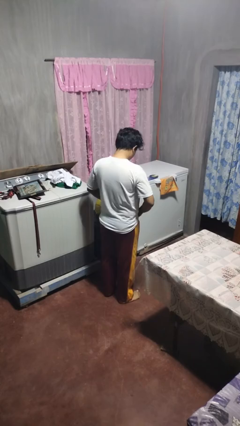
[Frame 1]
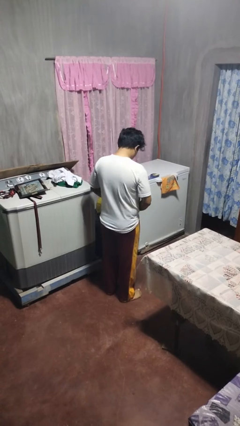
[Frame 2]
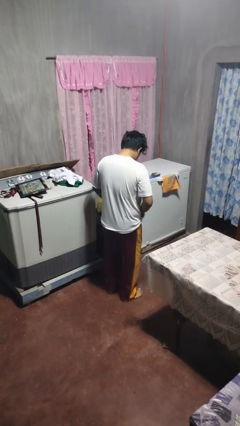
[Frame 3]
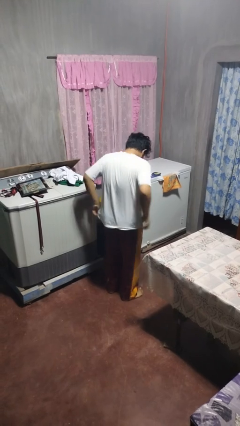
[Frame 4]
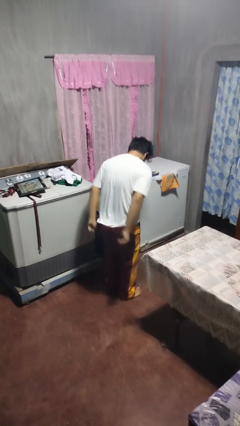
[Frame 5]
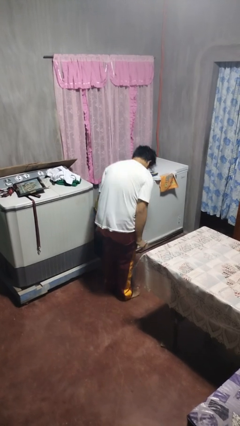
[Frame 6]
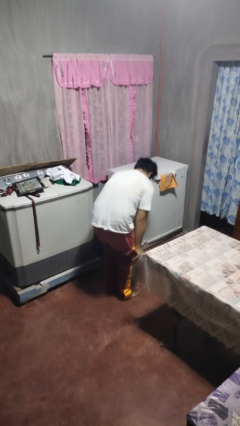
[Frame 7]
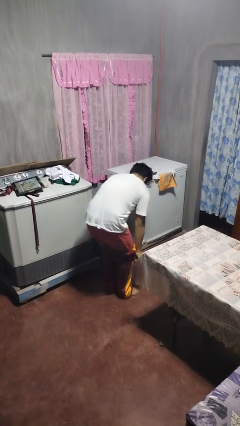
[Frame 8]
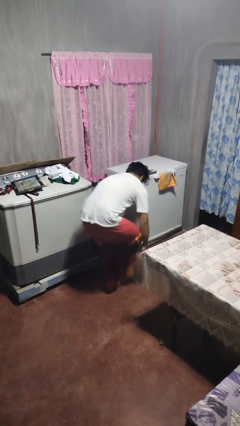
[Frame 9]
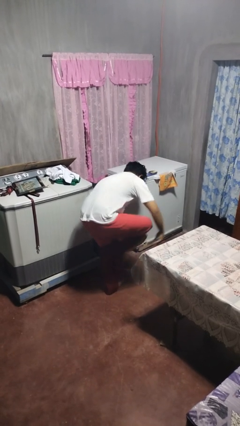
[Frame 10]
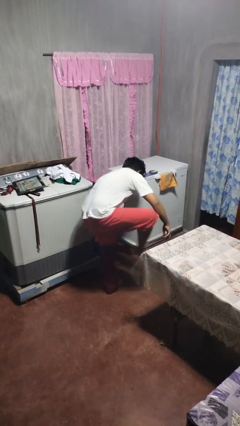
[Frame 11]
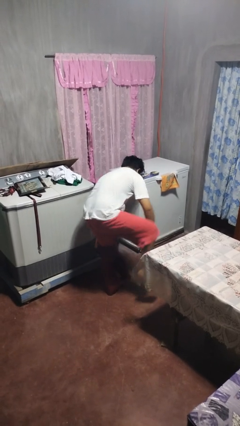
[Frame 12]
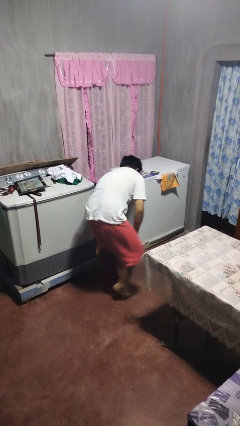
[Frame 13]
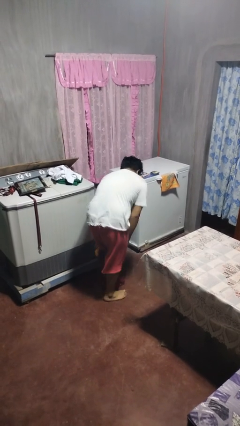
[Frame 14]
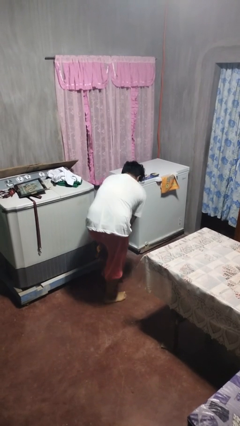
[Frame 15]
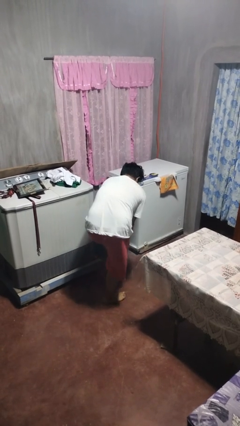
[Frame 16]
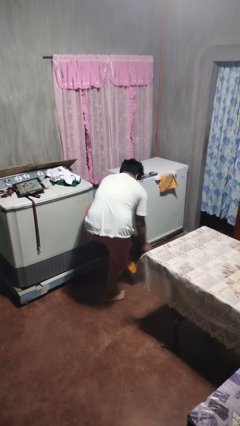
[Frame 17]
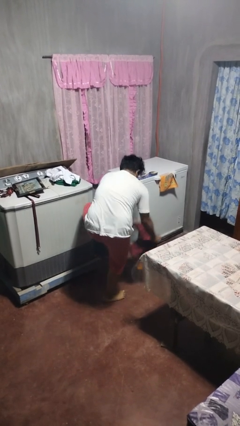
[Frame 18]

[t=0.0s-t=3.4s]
person takes off pants

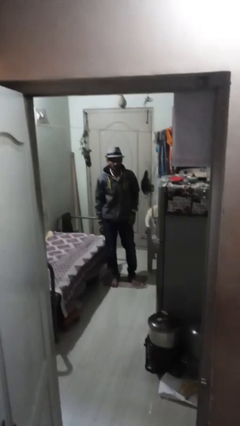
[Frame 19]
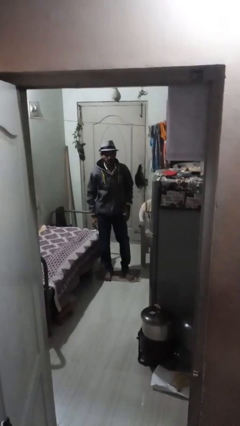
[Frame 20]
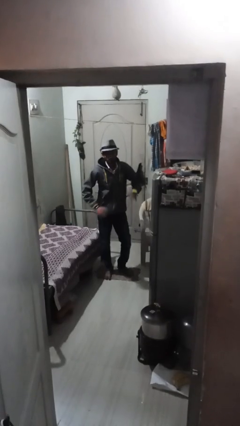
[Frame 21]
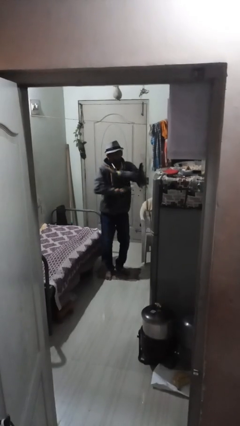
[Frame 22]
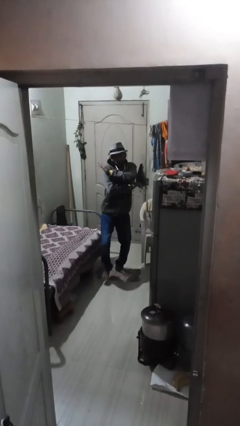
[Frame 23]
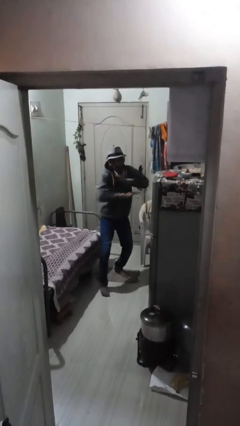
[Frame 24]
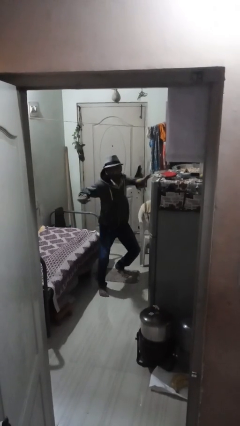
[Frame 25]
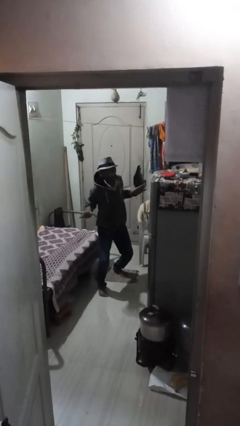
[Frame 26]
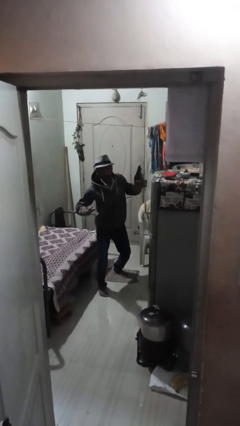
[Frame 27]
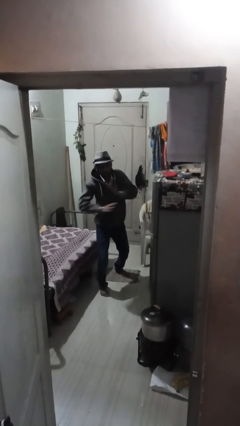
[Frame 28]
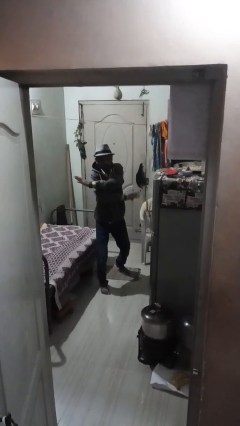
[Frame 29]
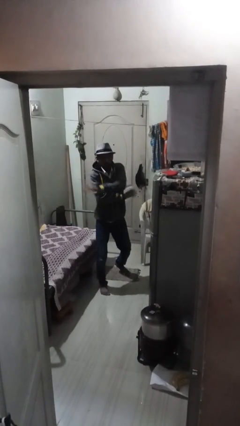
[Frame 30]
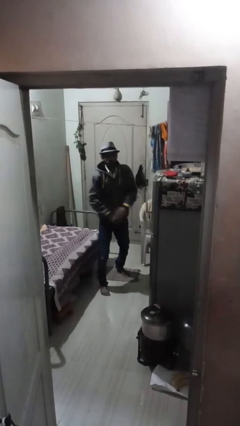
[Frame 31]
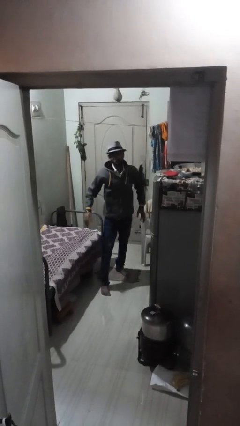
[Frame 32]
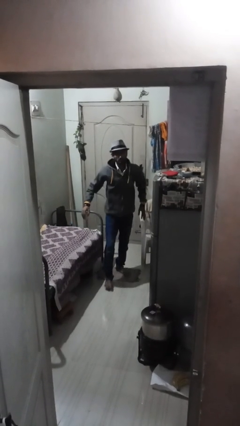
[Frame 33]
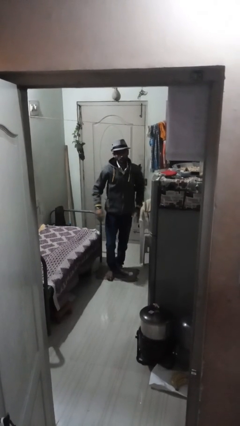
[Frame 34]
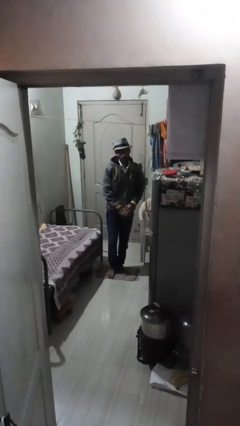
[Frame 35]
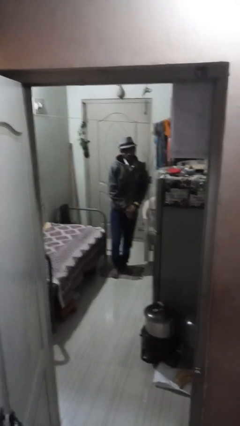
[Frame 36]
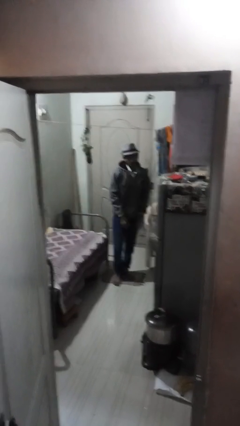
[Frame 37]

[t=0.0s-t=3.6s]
person karate chop

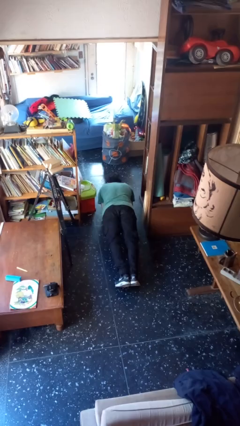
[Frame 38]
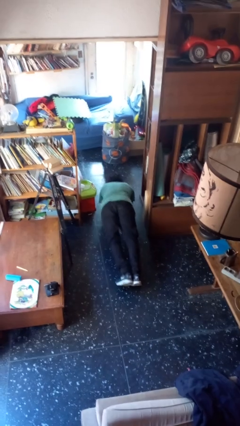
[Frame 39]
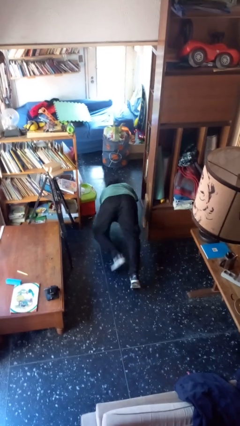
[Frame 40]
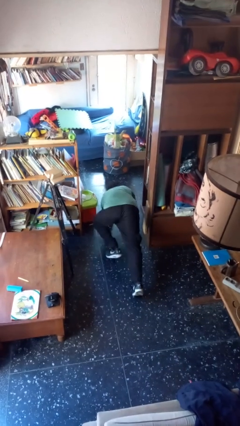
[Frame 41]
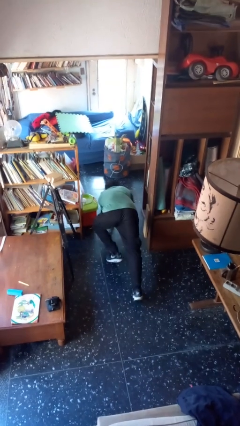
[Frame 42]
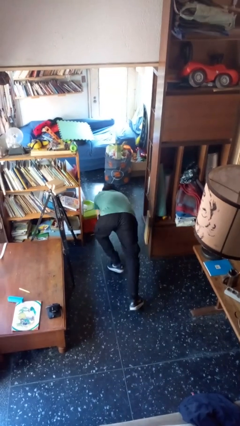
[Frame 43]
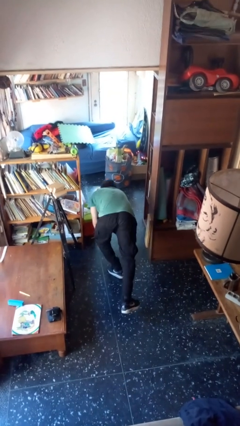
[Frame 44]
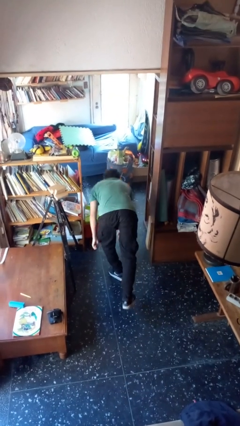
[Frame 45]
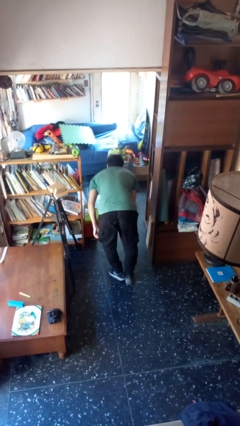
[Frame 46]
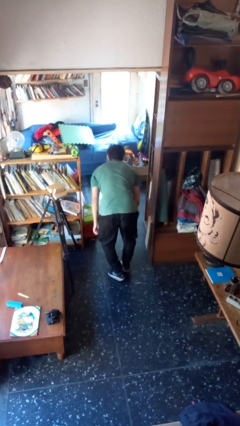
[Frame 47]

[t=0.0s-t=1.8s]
person stands up from floor

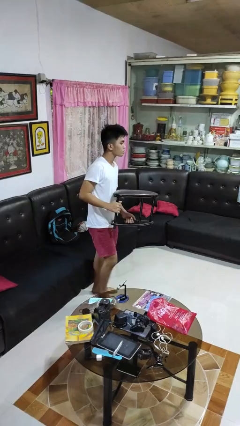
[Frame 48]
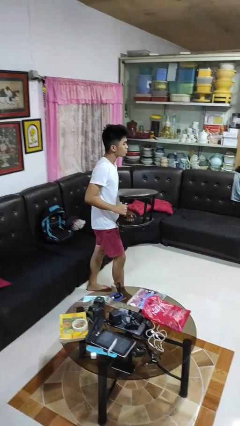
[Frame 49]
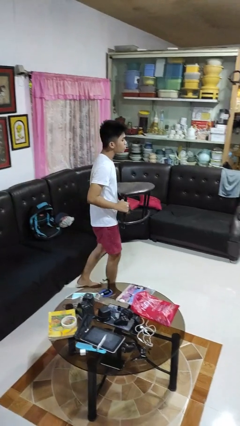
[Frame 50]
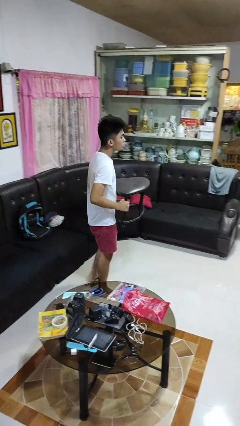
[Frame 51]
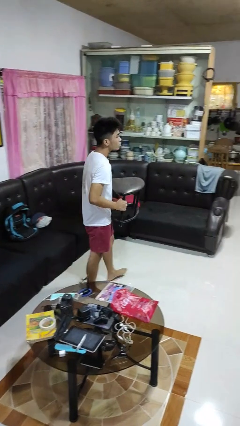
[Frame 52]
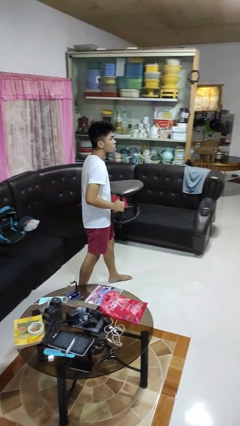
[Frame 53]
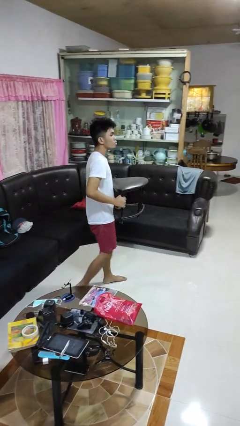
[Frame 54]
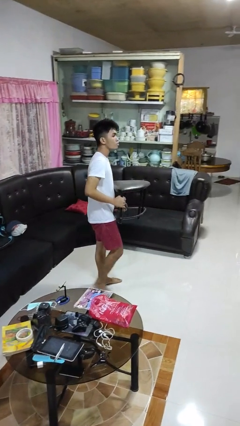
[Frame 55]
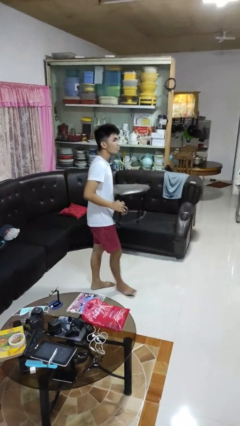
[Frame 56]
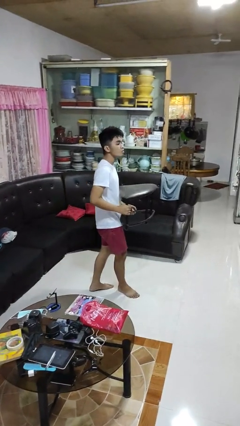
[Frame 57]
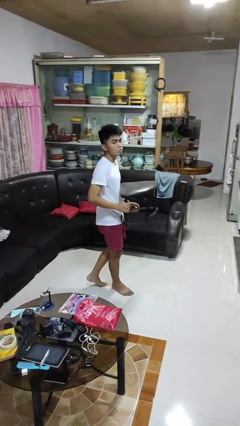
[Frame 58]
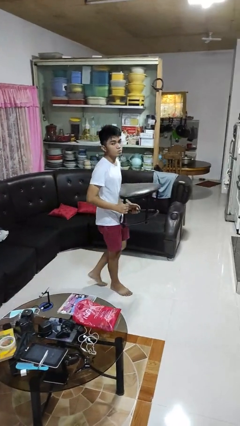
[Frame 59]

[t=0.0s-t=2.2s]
person carries furniture

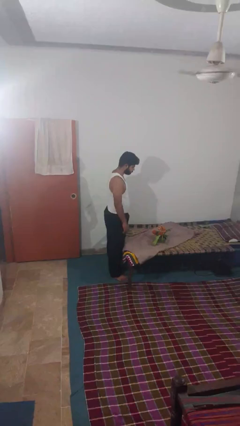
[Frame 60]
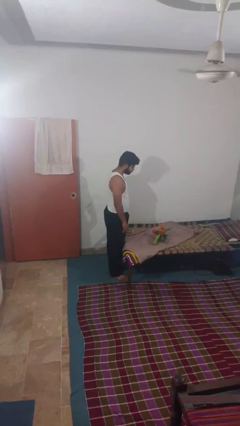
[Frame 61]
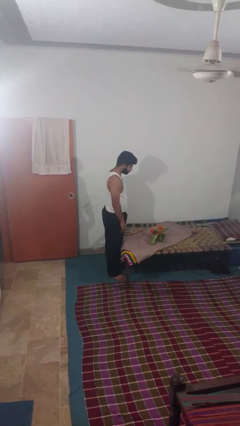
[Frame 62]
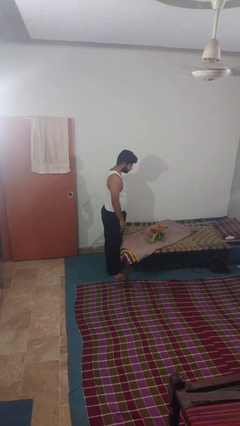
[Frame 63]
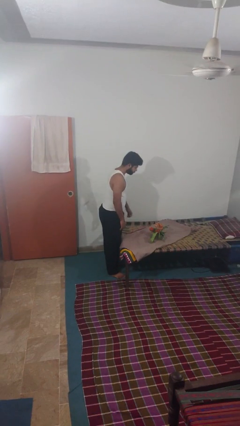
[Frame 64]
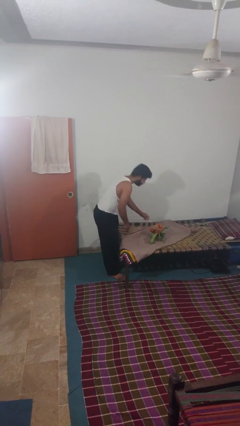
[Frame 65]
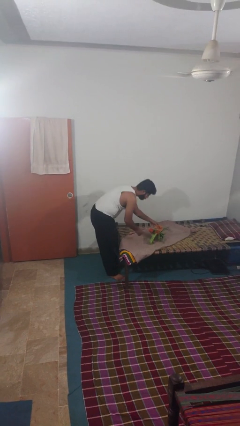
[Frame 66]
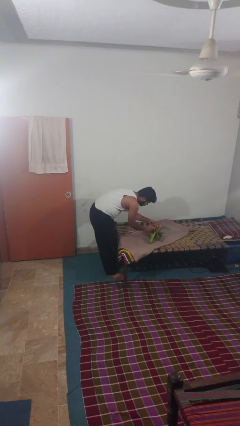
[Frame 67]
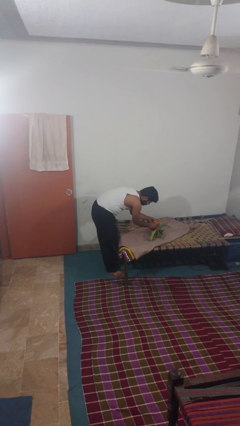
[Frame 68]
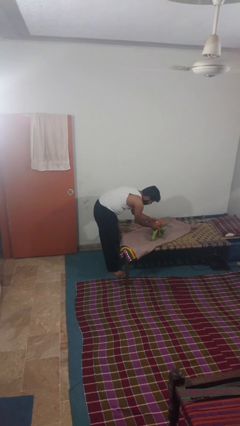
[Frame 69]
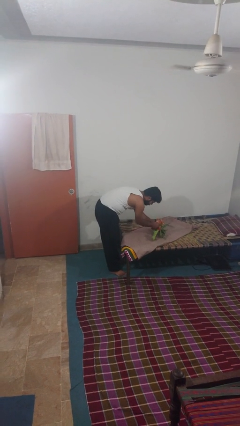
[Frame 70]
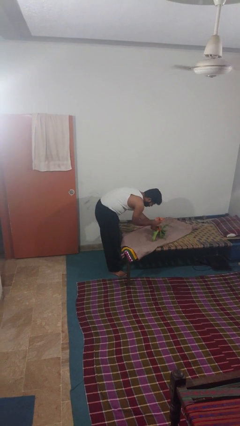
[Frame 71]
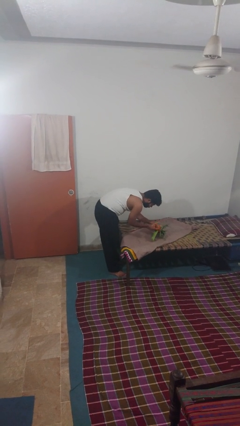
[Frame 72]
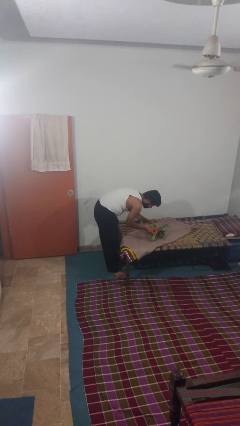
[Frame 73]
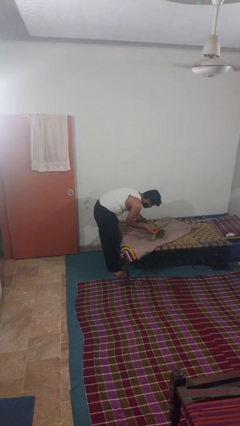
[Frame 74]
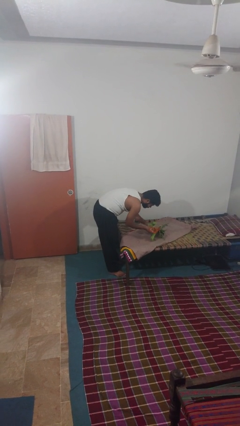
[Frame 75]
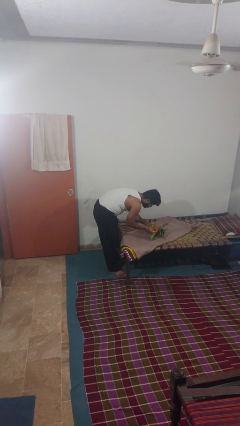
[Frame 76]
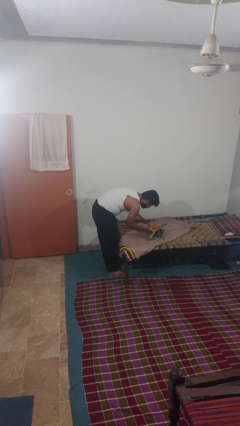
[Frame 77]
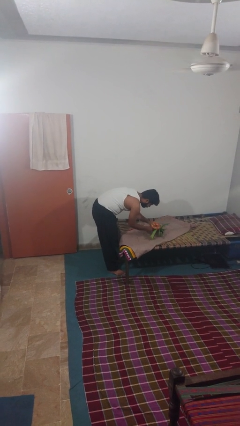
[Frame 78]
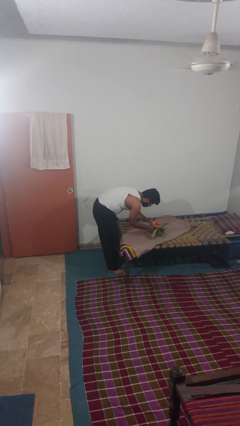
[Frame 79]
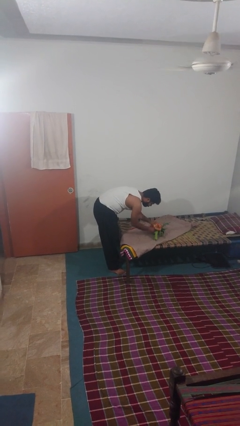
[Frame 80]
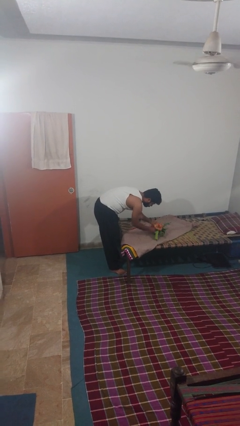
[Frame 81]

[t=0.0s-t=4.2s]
person arranges flowers in vase

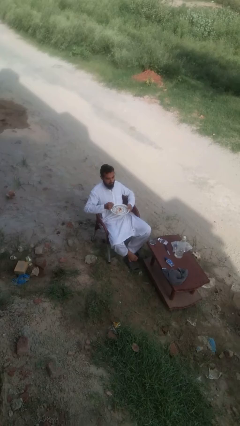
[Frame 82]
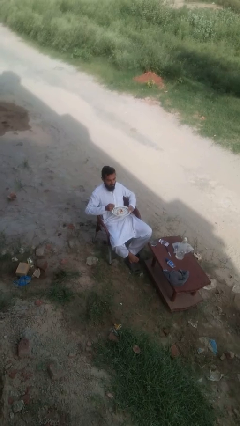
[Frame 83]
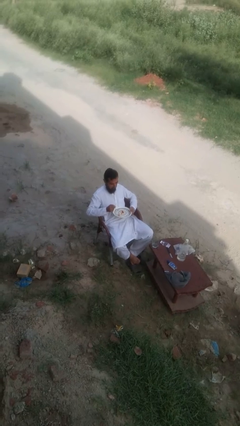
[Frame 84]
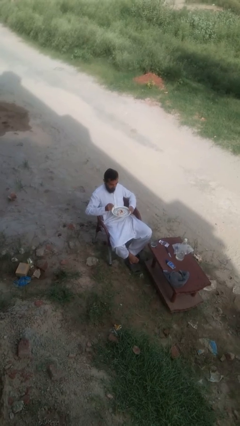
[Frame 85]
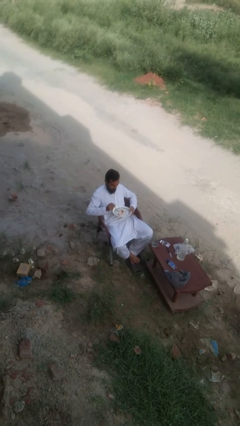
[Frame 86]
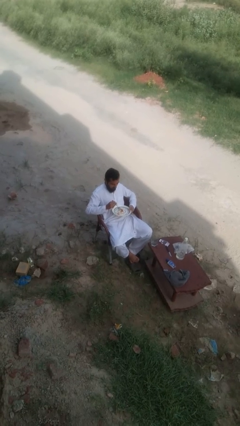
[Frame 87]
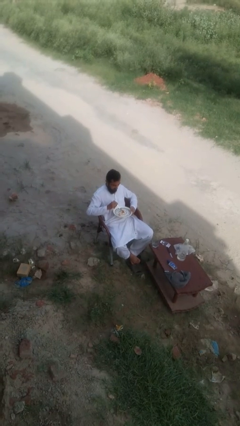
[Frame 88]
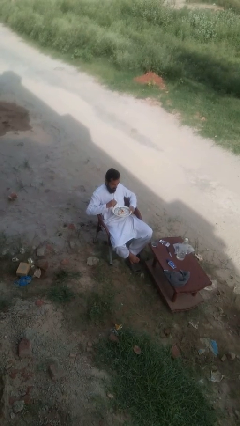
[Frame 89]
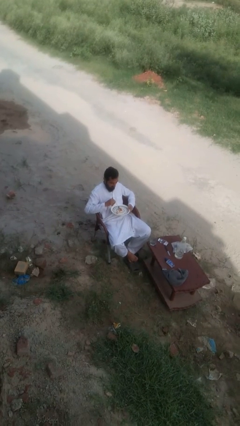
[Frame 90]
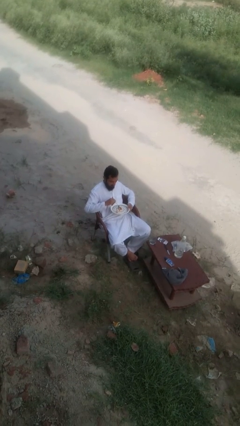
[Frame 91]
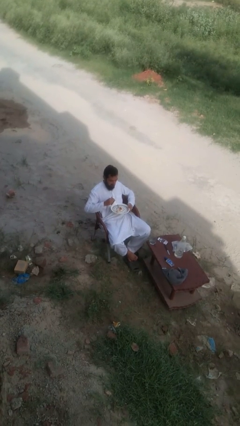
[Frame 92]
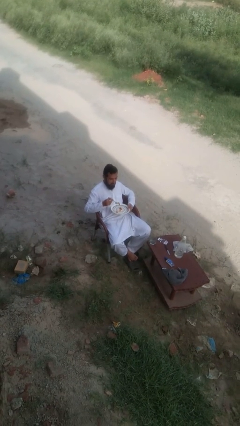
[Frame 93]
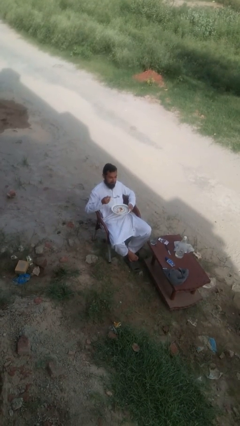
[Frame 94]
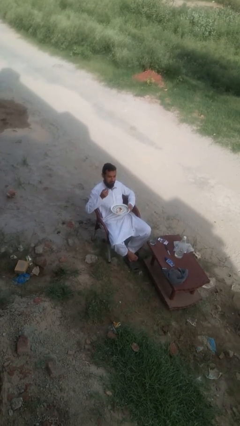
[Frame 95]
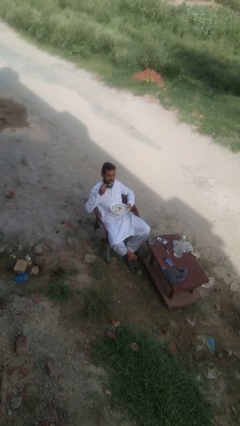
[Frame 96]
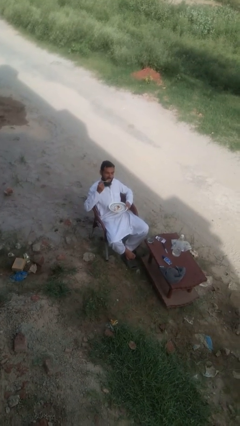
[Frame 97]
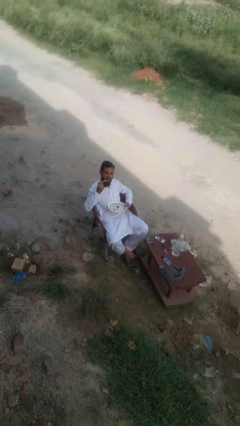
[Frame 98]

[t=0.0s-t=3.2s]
person eats with utensil
